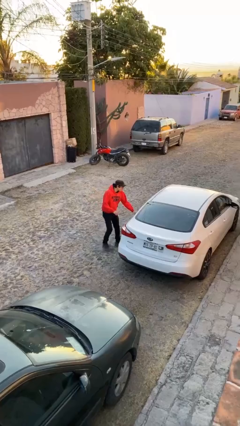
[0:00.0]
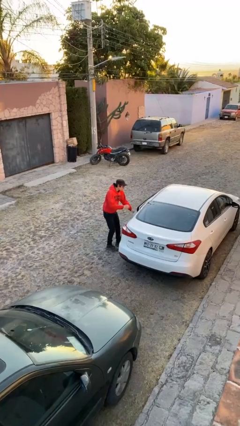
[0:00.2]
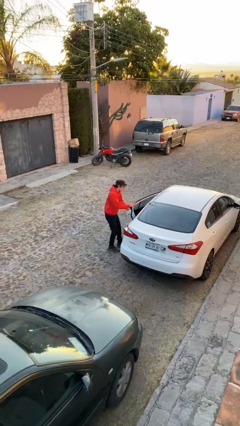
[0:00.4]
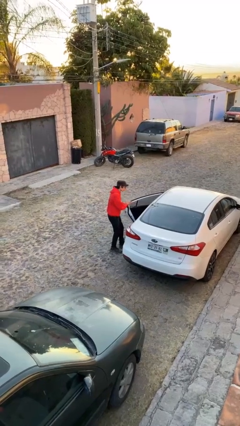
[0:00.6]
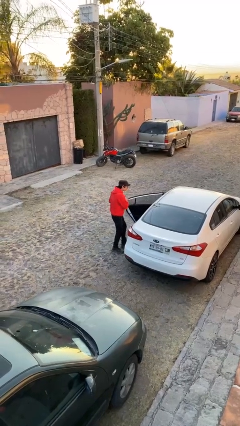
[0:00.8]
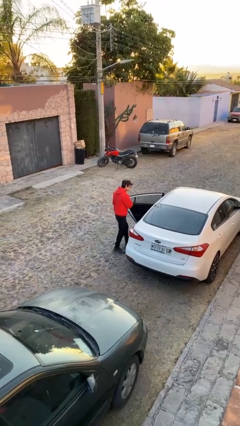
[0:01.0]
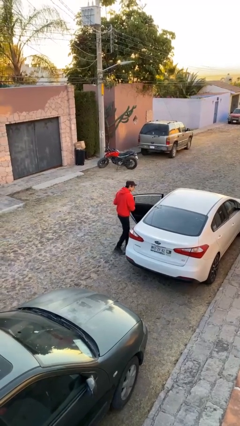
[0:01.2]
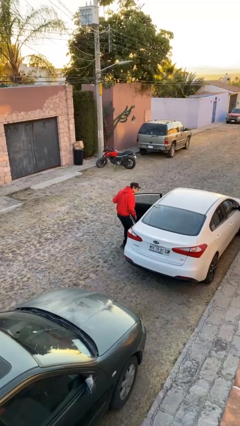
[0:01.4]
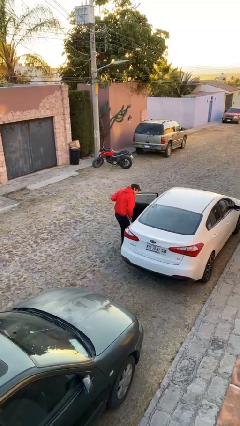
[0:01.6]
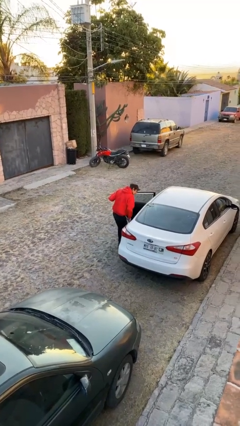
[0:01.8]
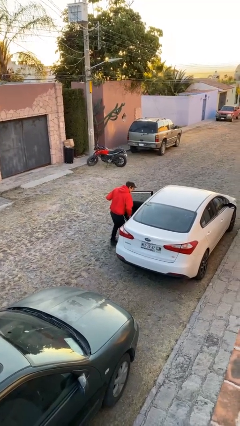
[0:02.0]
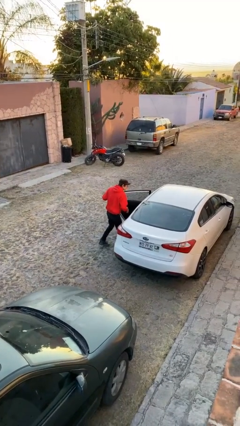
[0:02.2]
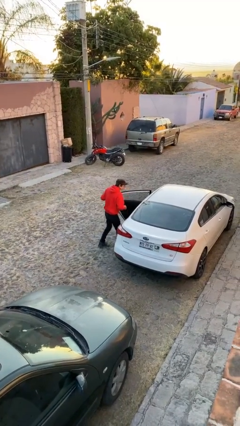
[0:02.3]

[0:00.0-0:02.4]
person opens facility door

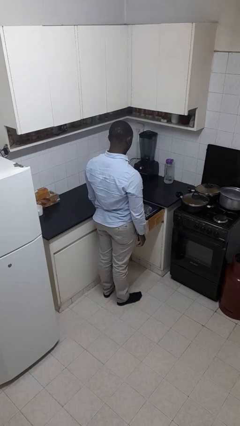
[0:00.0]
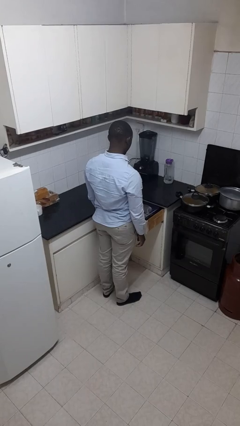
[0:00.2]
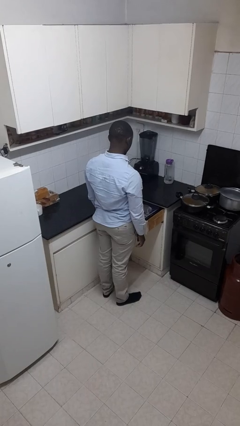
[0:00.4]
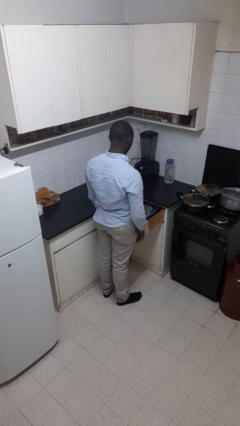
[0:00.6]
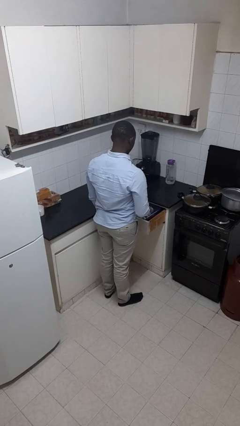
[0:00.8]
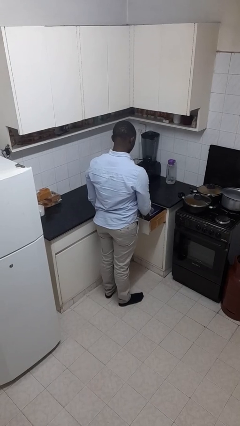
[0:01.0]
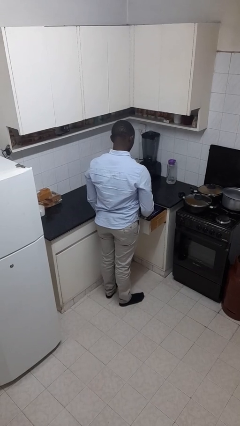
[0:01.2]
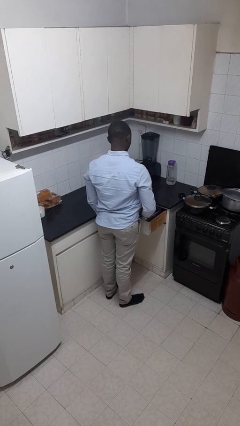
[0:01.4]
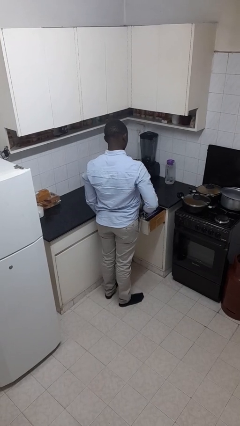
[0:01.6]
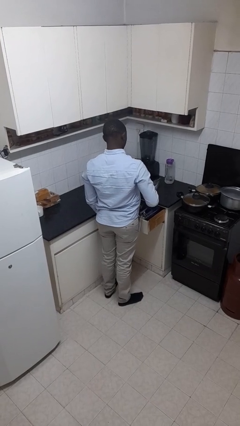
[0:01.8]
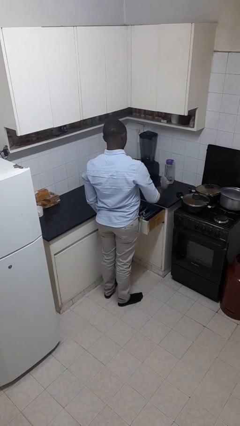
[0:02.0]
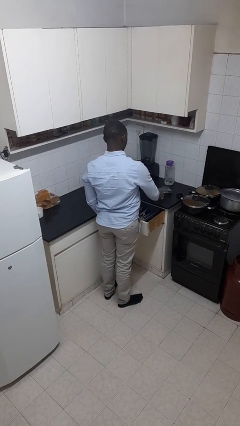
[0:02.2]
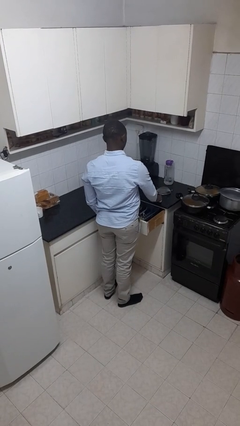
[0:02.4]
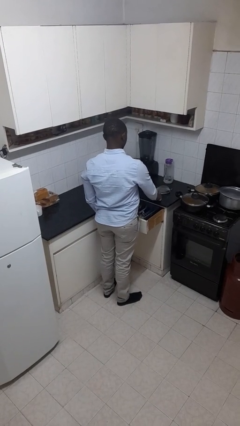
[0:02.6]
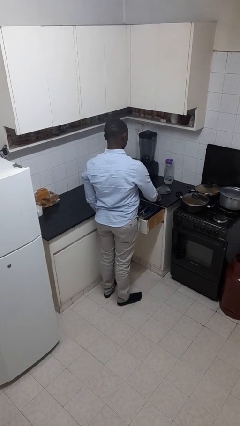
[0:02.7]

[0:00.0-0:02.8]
person takes object from kitchen drawer

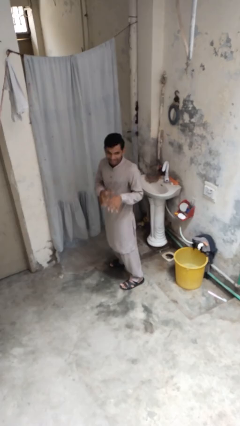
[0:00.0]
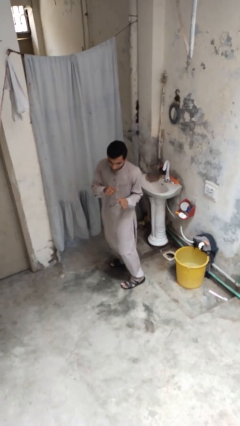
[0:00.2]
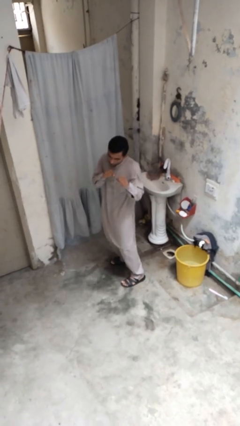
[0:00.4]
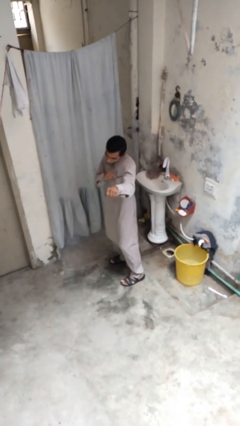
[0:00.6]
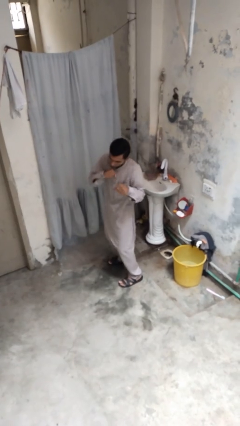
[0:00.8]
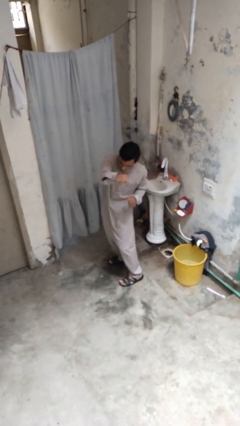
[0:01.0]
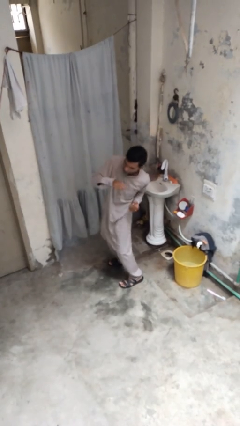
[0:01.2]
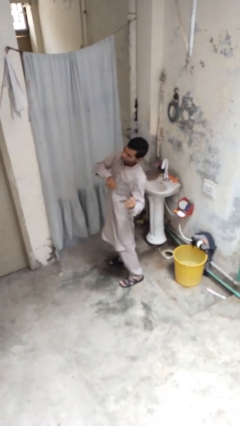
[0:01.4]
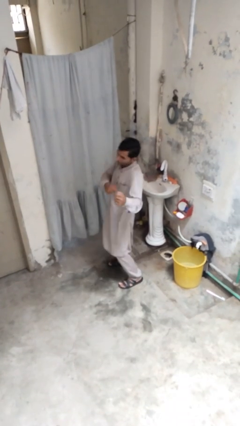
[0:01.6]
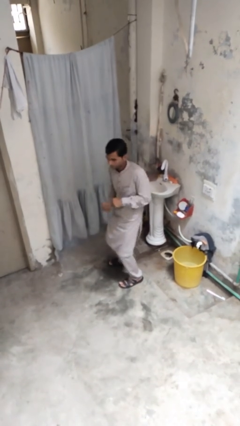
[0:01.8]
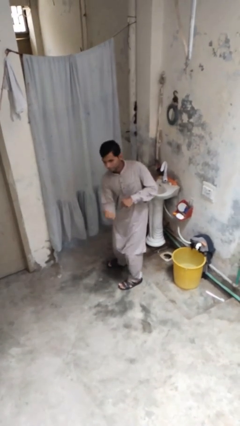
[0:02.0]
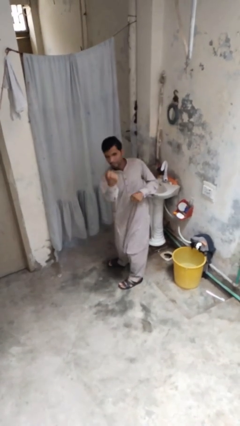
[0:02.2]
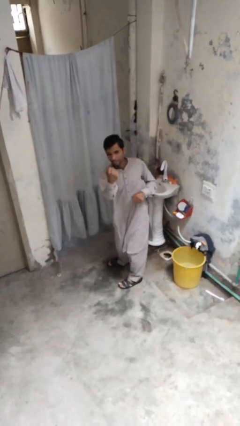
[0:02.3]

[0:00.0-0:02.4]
person punches

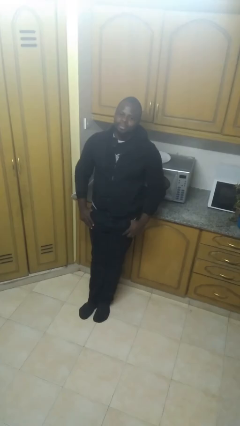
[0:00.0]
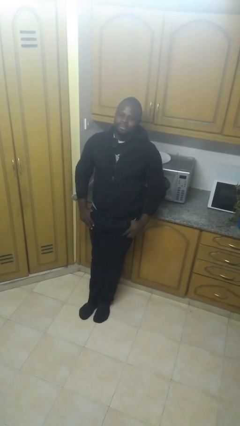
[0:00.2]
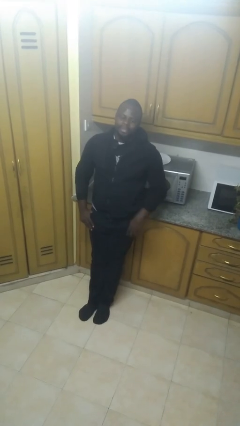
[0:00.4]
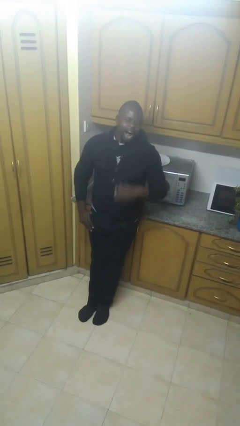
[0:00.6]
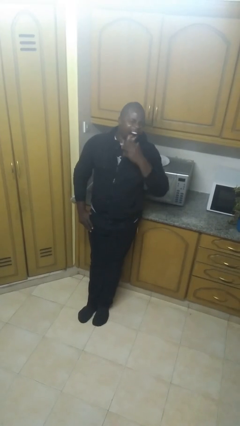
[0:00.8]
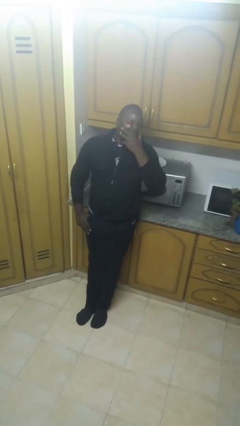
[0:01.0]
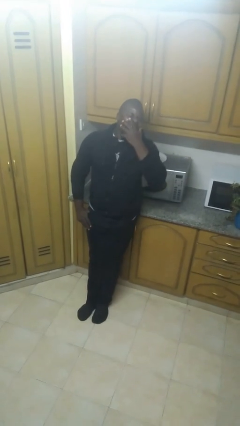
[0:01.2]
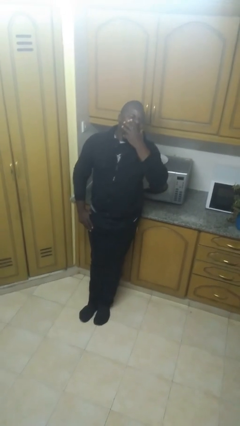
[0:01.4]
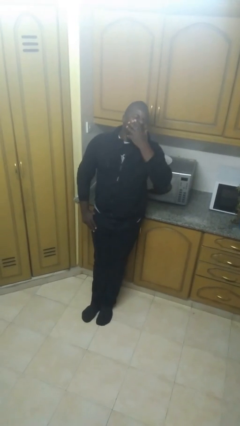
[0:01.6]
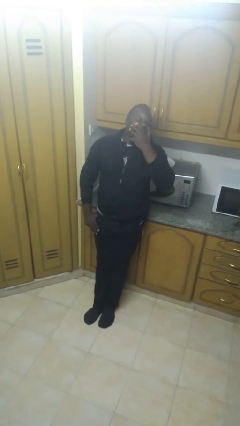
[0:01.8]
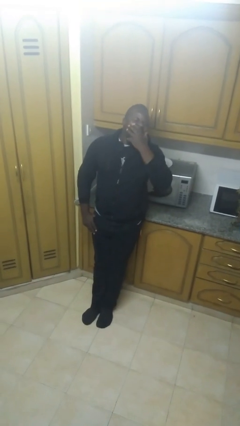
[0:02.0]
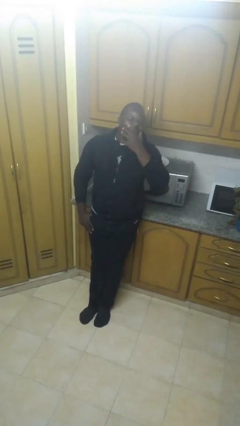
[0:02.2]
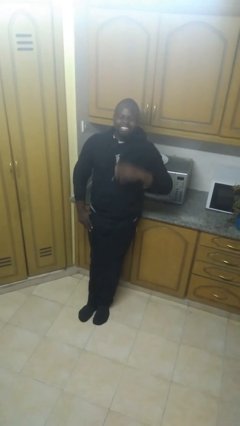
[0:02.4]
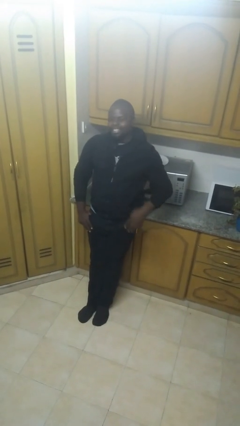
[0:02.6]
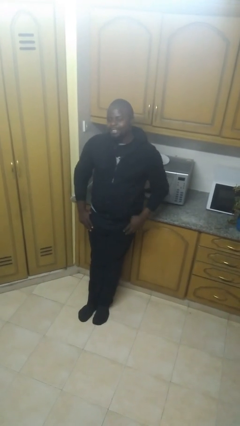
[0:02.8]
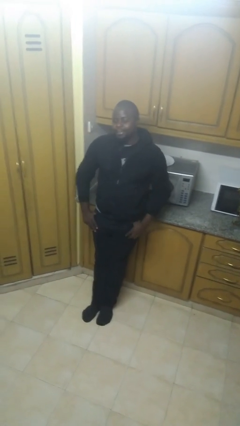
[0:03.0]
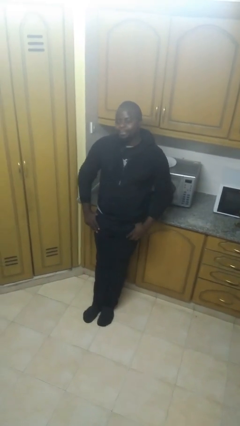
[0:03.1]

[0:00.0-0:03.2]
person yawns

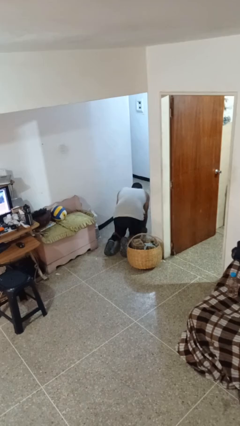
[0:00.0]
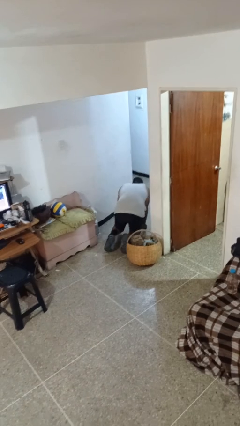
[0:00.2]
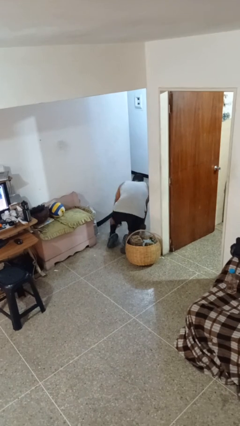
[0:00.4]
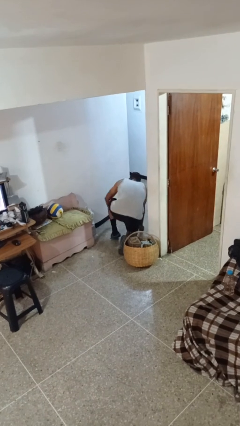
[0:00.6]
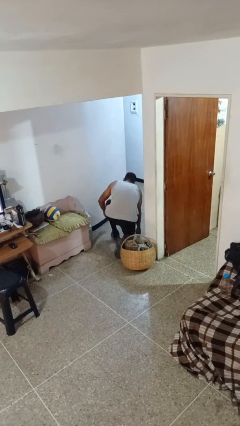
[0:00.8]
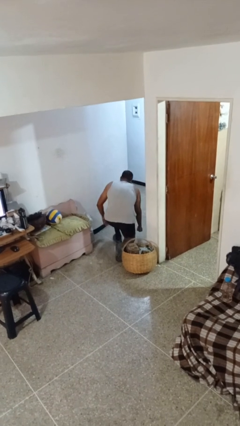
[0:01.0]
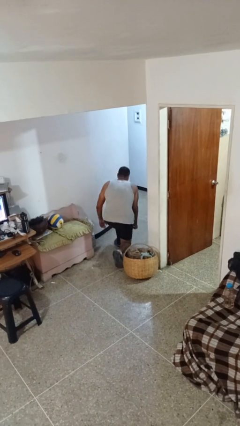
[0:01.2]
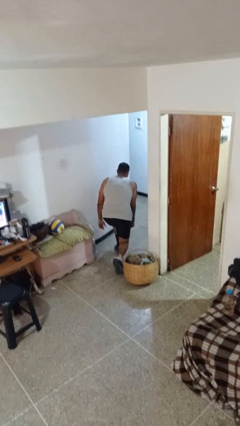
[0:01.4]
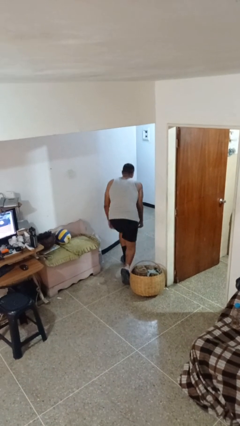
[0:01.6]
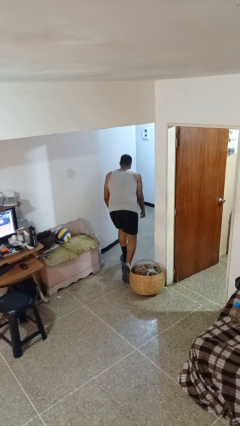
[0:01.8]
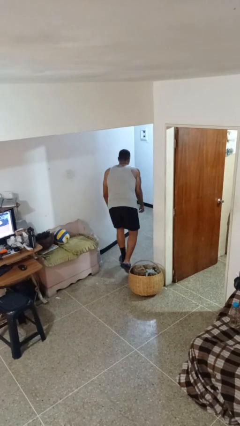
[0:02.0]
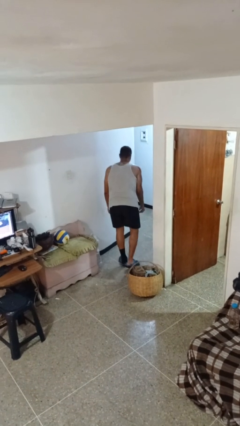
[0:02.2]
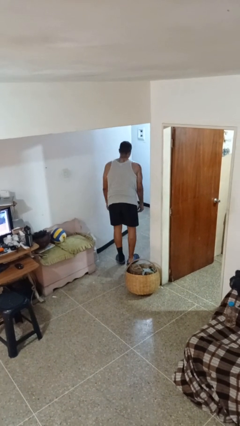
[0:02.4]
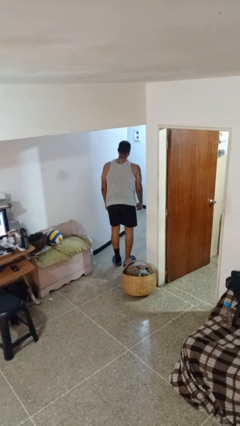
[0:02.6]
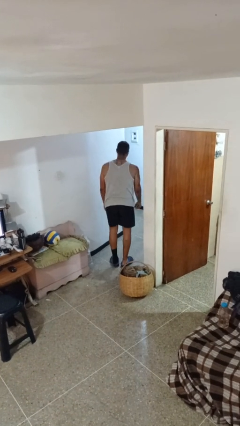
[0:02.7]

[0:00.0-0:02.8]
person stands up from floor

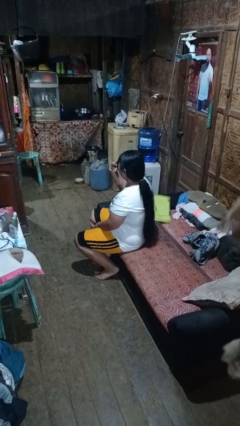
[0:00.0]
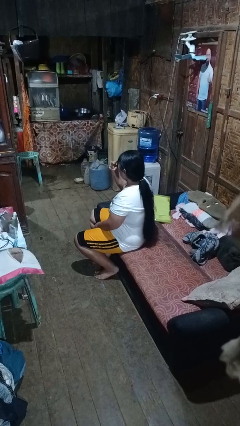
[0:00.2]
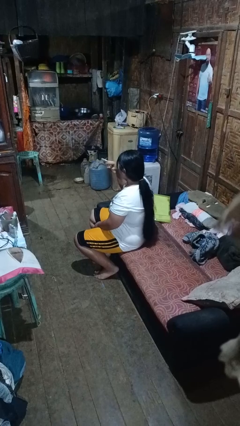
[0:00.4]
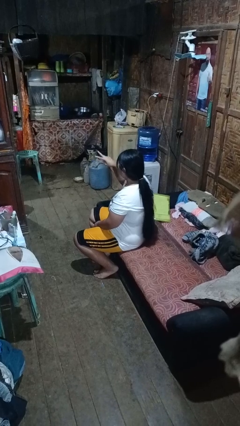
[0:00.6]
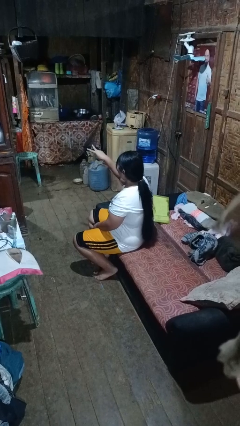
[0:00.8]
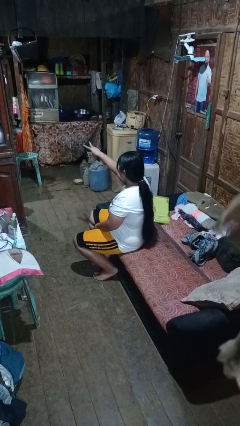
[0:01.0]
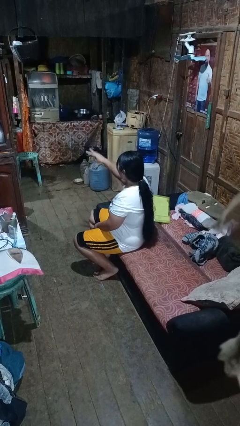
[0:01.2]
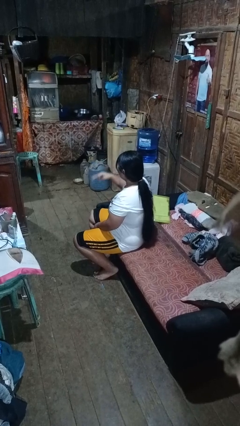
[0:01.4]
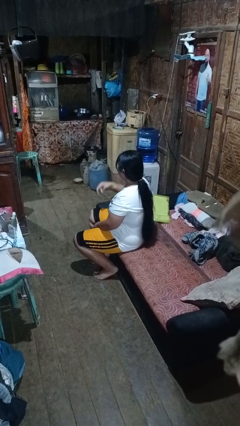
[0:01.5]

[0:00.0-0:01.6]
person gestures watch closely

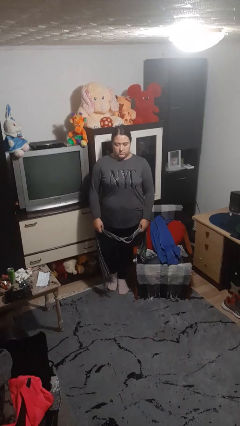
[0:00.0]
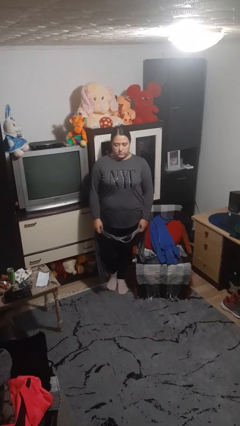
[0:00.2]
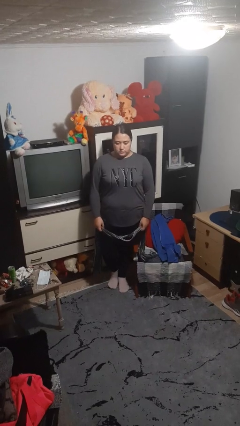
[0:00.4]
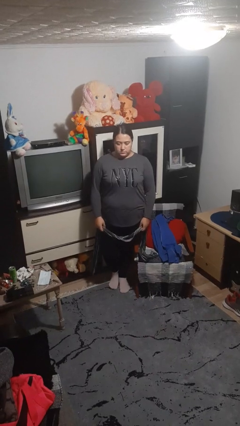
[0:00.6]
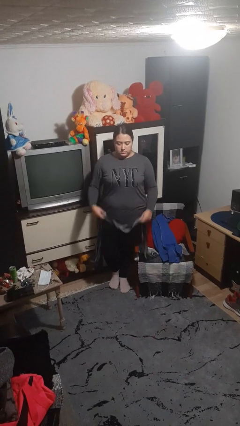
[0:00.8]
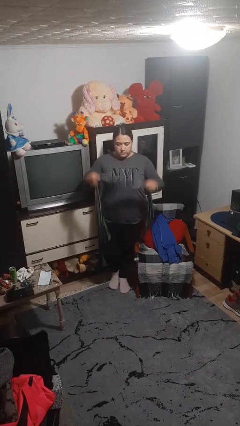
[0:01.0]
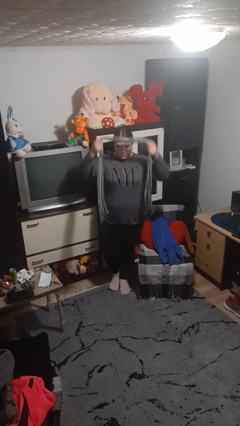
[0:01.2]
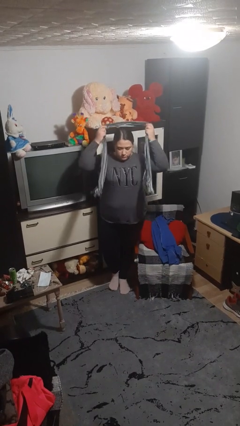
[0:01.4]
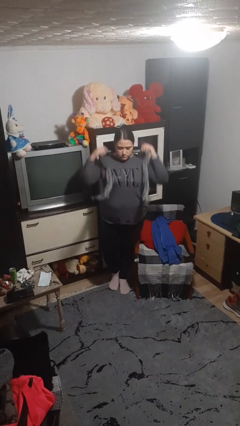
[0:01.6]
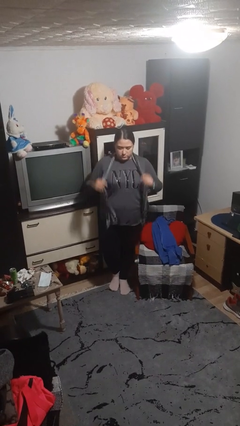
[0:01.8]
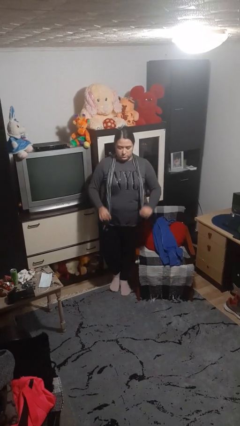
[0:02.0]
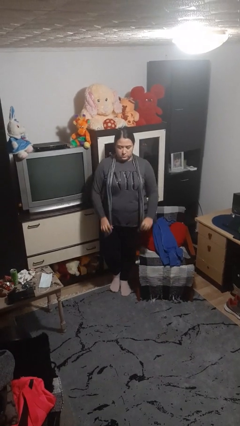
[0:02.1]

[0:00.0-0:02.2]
person puts on scarf
